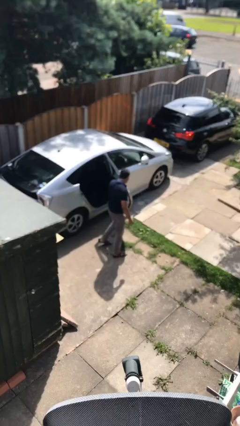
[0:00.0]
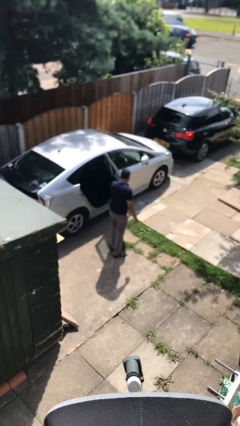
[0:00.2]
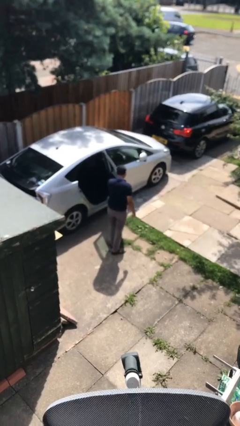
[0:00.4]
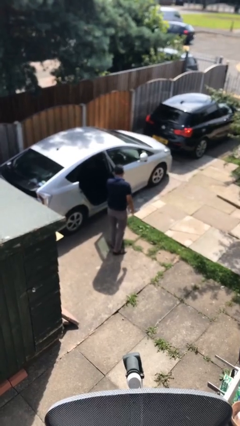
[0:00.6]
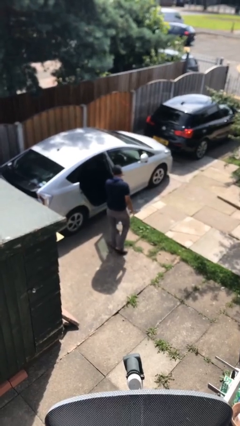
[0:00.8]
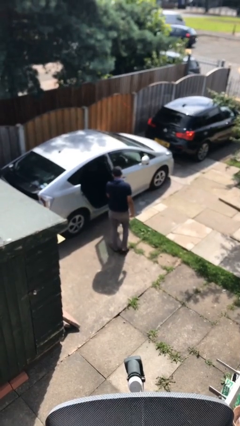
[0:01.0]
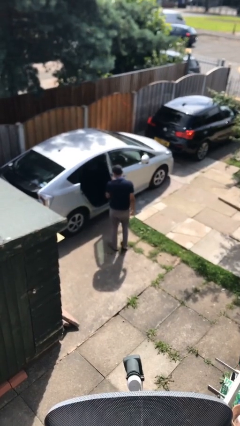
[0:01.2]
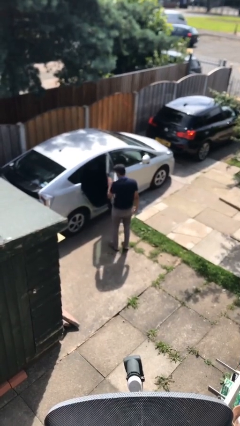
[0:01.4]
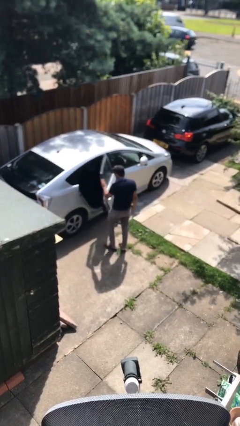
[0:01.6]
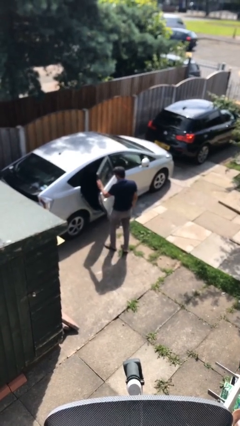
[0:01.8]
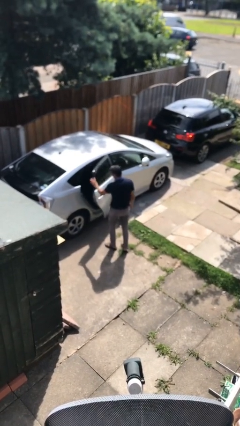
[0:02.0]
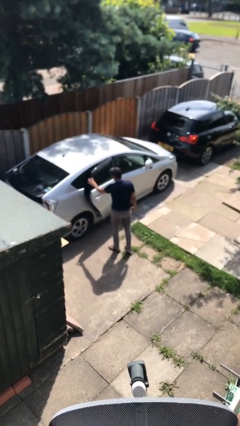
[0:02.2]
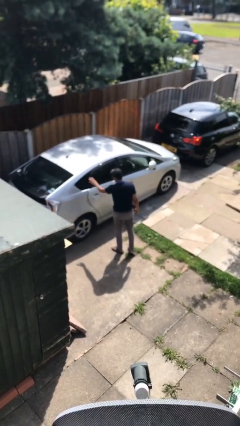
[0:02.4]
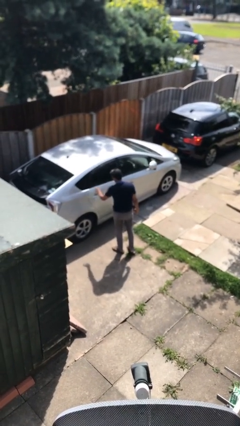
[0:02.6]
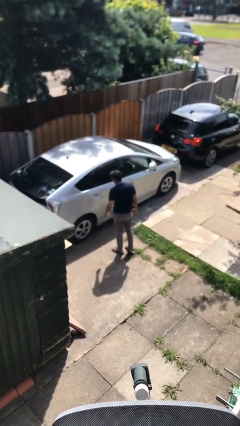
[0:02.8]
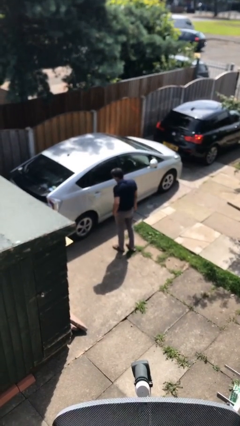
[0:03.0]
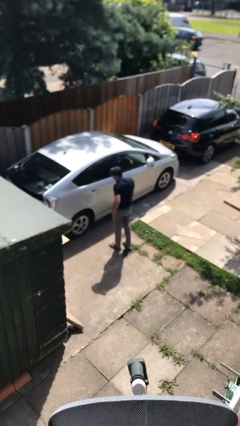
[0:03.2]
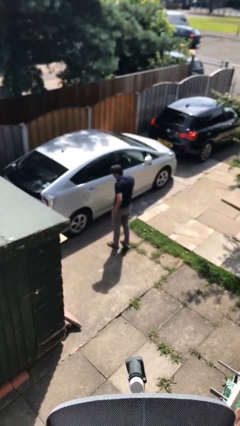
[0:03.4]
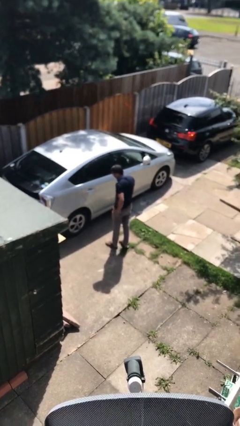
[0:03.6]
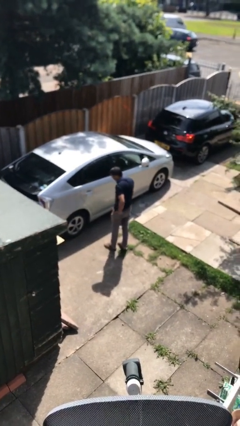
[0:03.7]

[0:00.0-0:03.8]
person closes car door

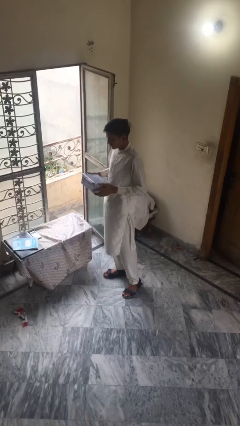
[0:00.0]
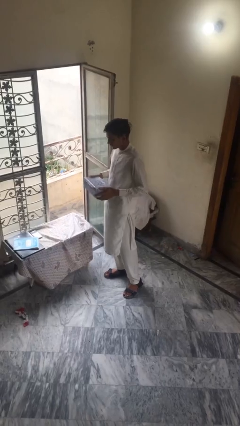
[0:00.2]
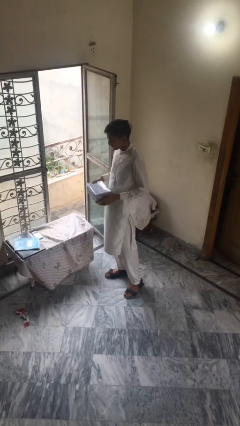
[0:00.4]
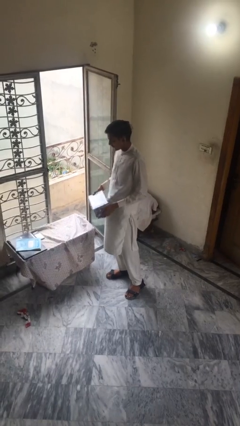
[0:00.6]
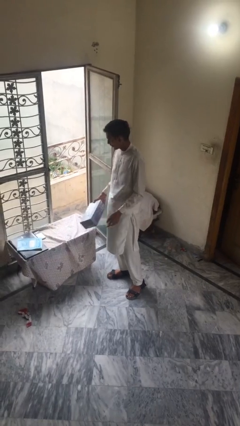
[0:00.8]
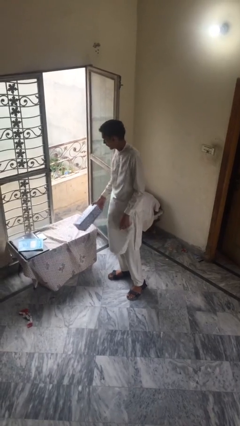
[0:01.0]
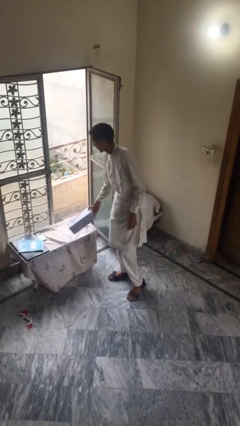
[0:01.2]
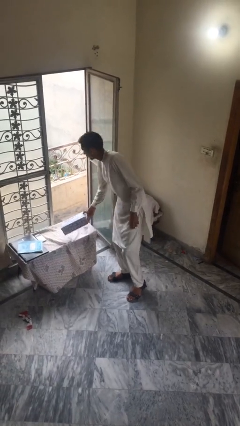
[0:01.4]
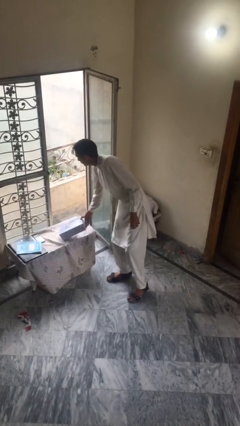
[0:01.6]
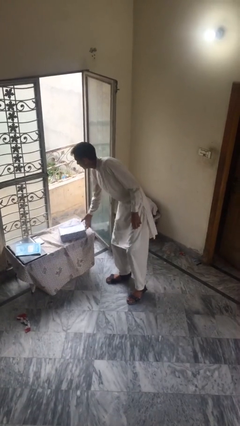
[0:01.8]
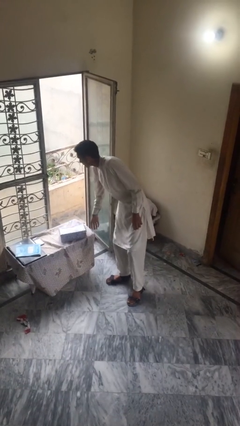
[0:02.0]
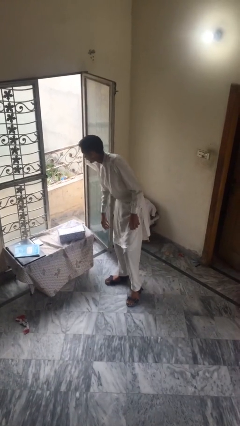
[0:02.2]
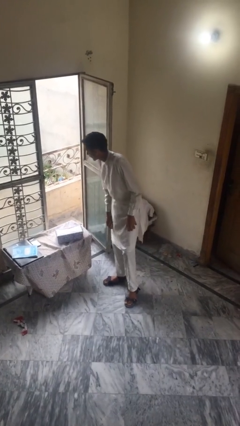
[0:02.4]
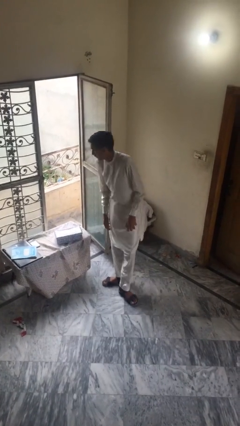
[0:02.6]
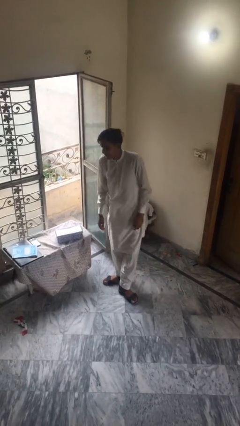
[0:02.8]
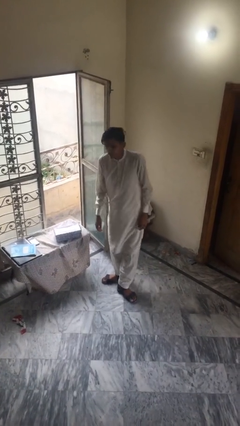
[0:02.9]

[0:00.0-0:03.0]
person puts down object on table

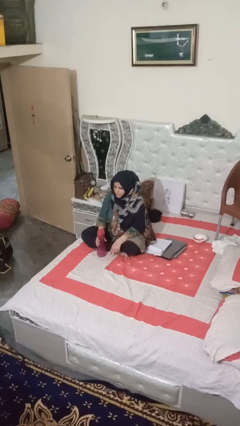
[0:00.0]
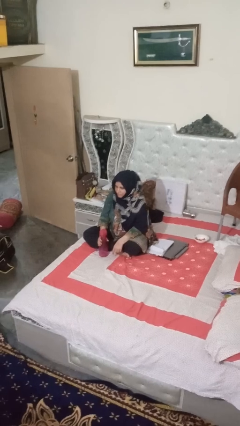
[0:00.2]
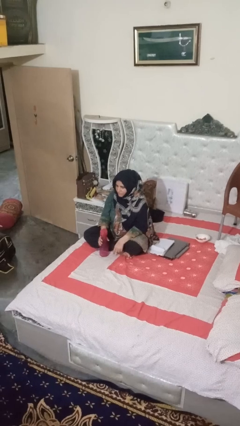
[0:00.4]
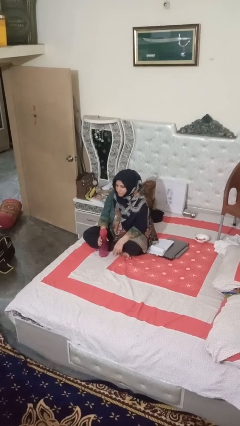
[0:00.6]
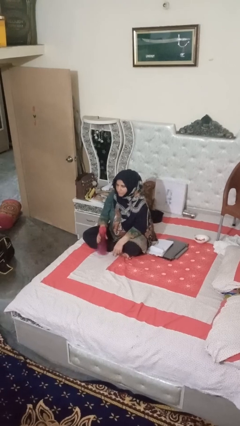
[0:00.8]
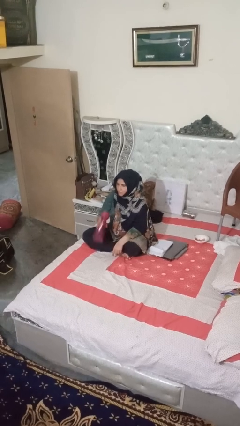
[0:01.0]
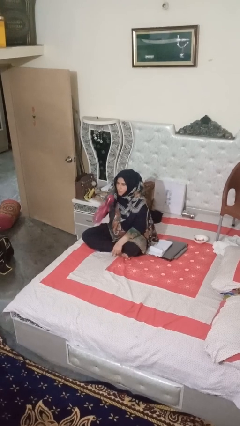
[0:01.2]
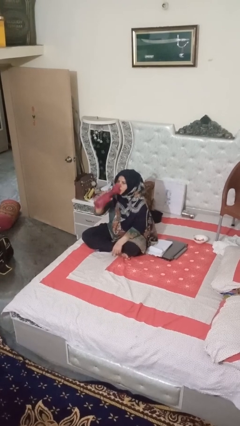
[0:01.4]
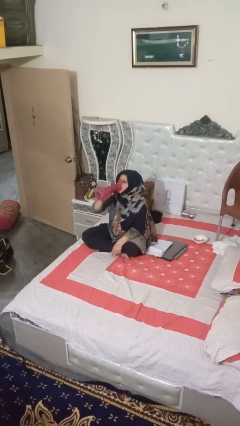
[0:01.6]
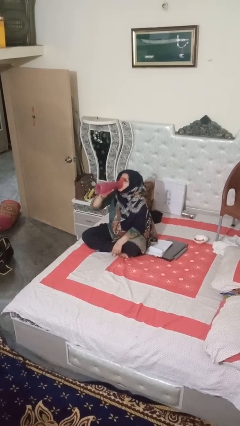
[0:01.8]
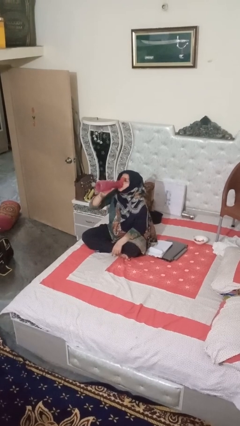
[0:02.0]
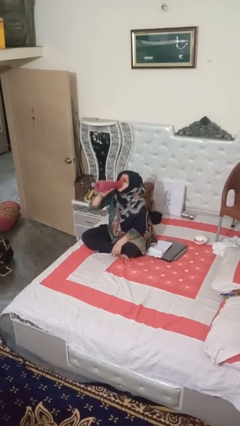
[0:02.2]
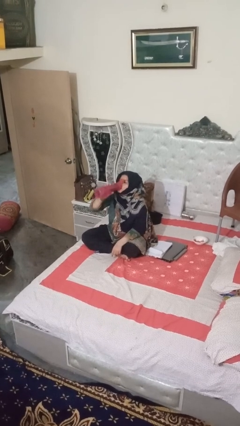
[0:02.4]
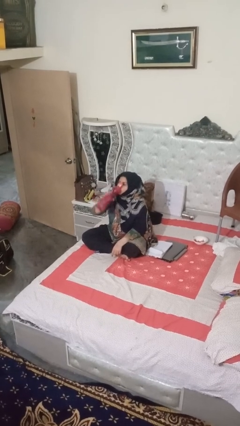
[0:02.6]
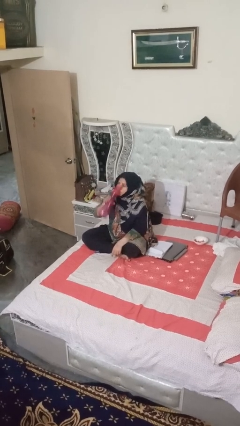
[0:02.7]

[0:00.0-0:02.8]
person drinks from bottle

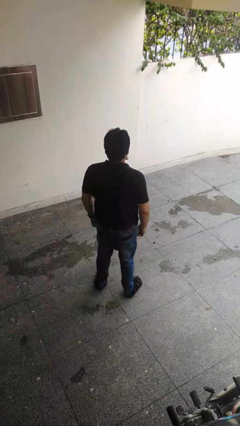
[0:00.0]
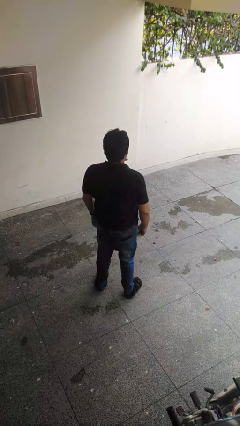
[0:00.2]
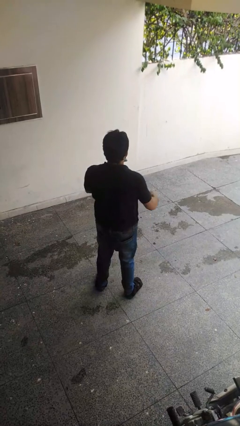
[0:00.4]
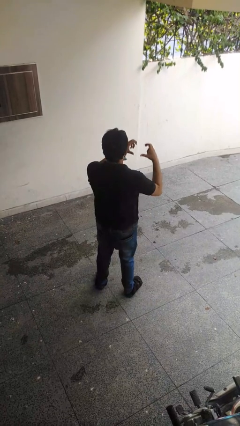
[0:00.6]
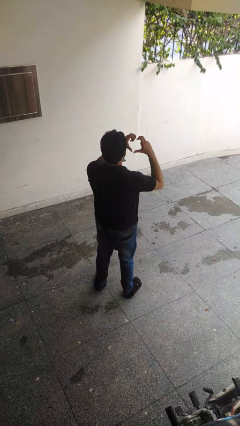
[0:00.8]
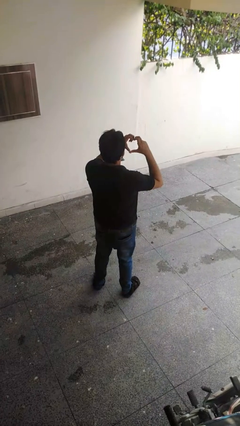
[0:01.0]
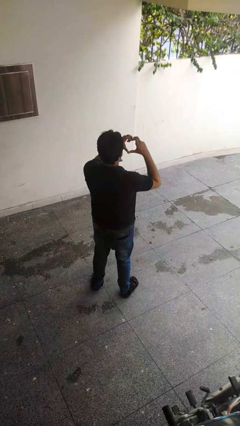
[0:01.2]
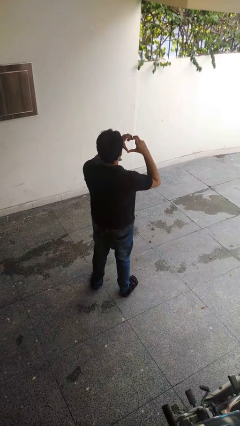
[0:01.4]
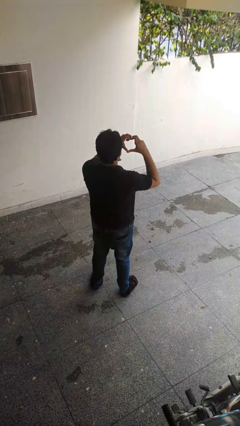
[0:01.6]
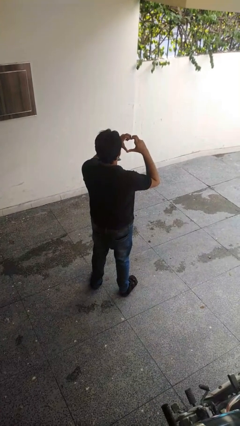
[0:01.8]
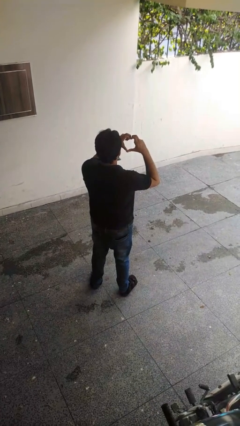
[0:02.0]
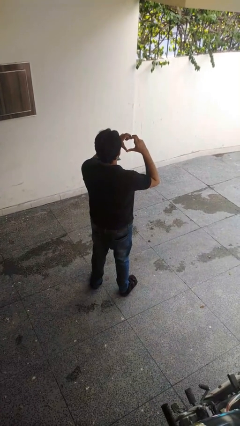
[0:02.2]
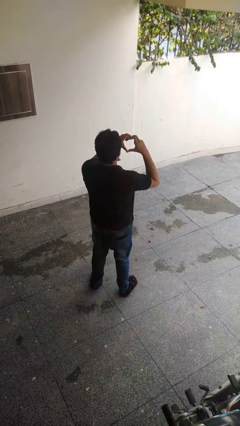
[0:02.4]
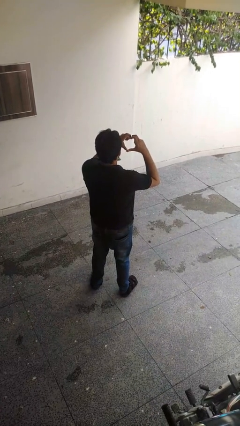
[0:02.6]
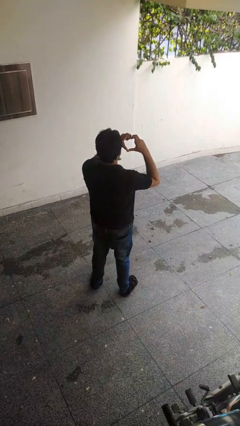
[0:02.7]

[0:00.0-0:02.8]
person gestures heart

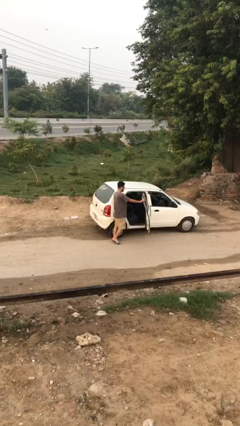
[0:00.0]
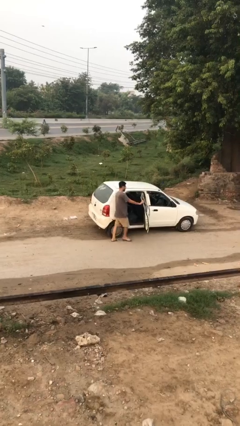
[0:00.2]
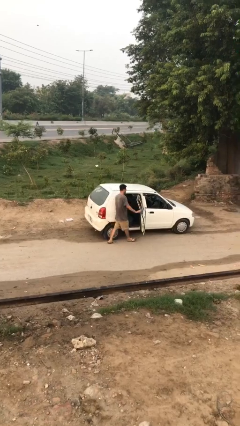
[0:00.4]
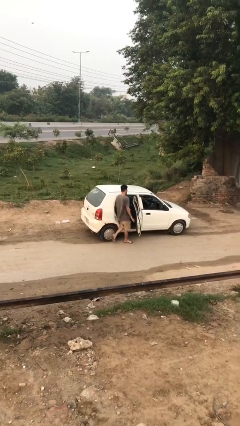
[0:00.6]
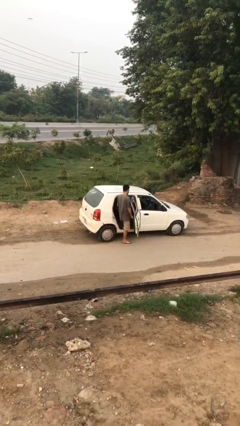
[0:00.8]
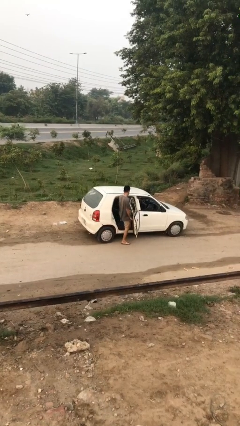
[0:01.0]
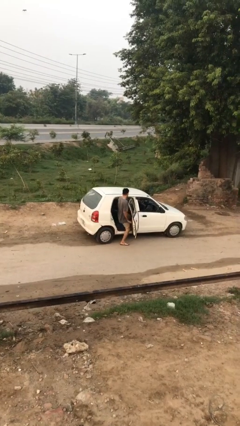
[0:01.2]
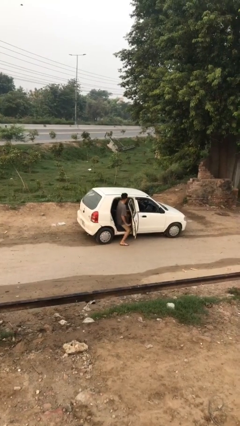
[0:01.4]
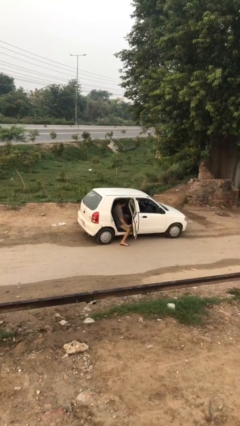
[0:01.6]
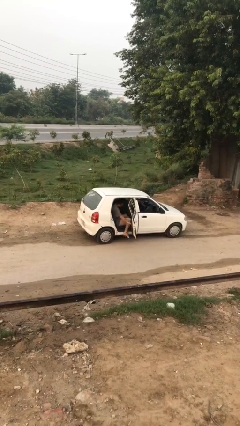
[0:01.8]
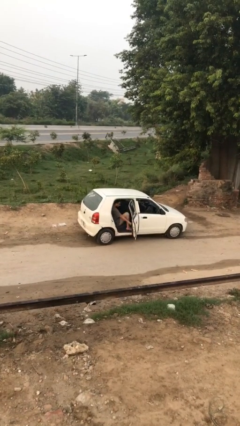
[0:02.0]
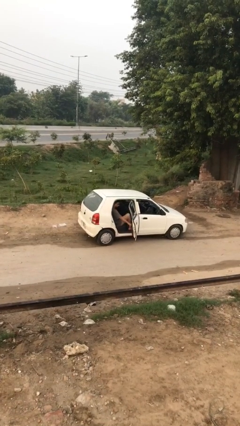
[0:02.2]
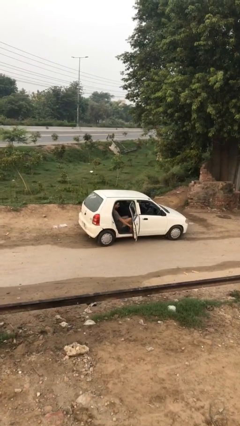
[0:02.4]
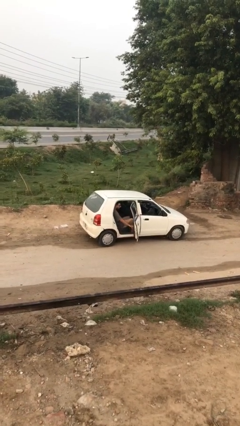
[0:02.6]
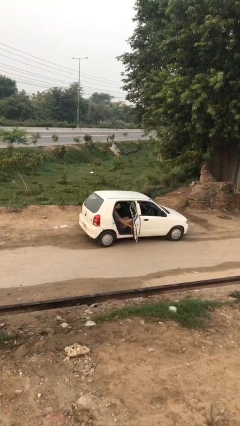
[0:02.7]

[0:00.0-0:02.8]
person enters car

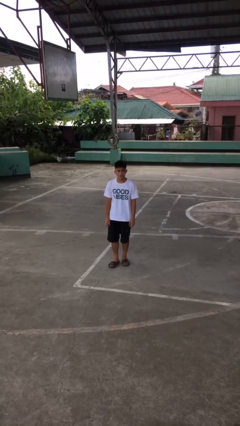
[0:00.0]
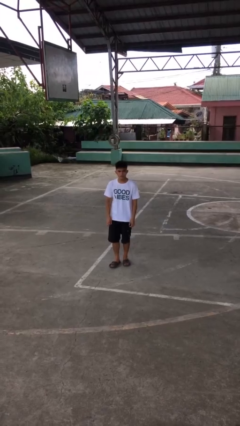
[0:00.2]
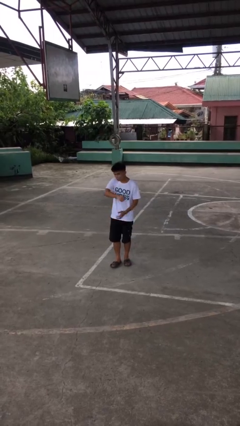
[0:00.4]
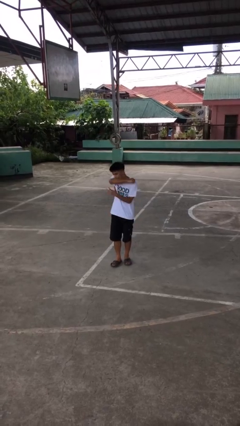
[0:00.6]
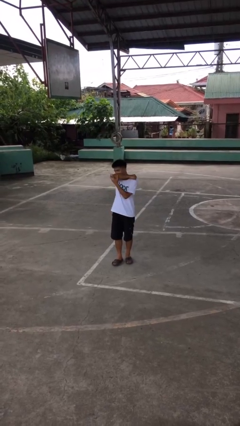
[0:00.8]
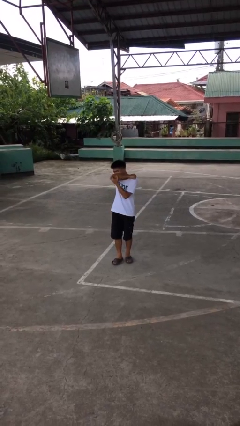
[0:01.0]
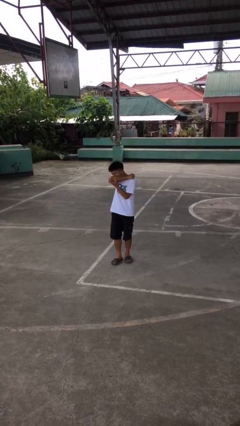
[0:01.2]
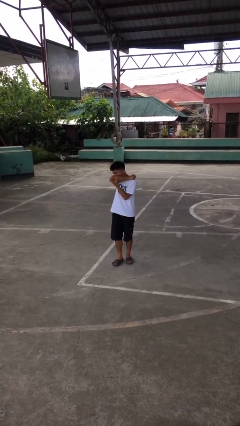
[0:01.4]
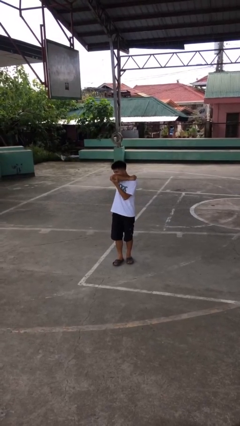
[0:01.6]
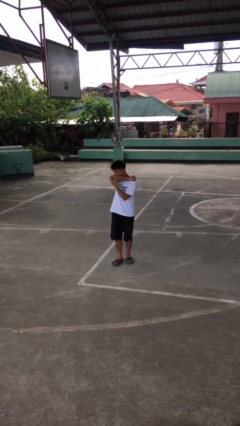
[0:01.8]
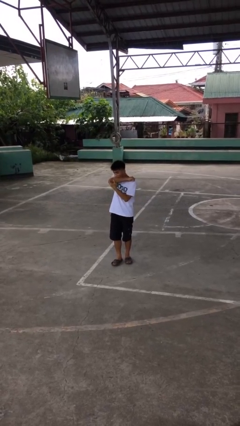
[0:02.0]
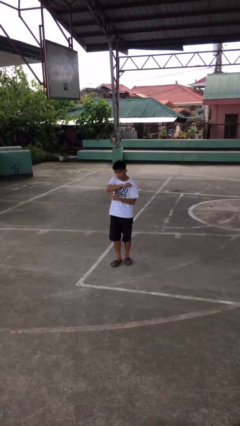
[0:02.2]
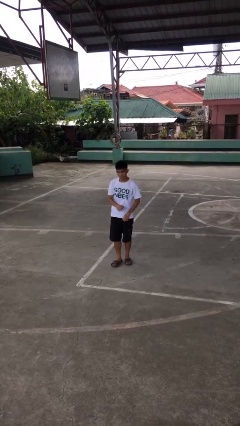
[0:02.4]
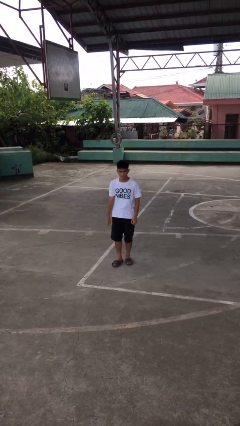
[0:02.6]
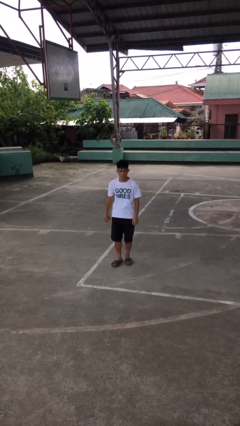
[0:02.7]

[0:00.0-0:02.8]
person sneezes into arm
